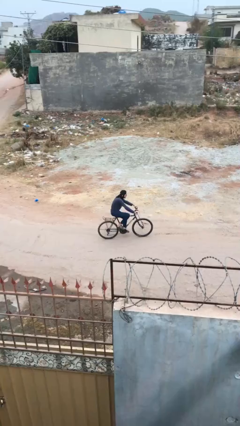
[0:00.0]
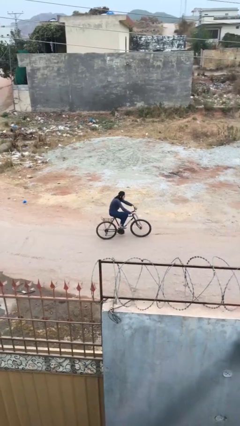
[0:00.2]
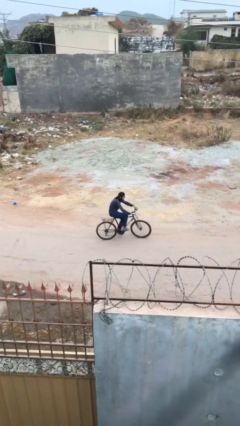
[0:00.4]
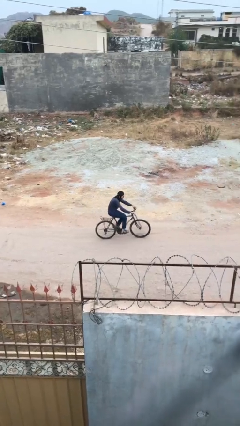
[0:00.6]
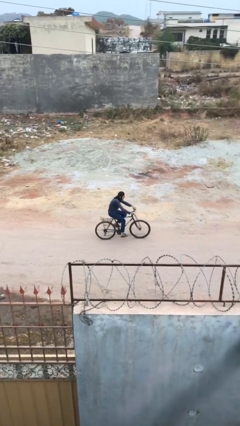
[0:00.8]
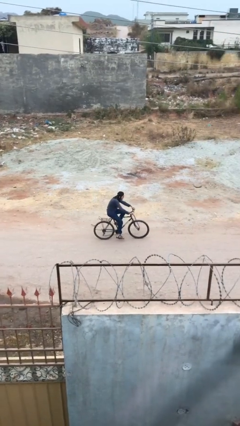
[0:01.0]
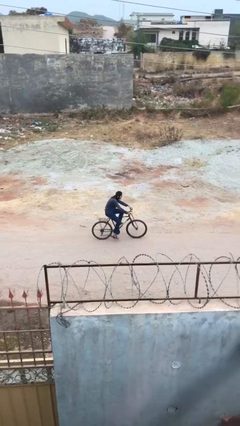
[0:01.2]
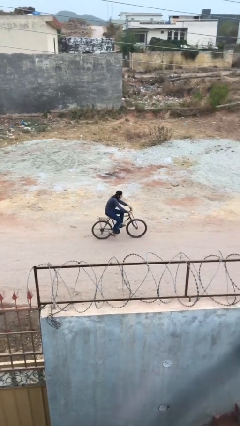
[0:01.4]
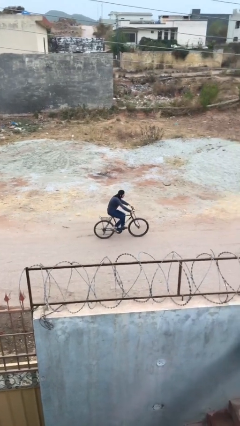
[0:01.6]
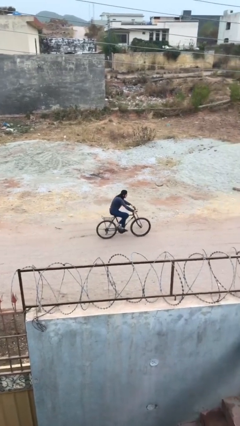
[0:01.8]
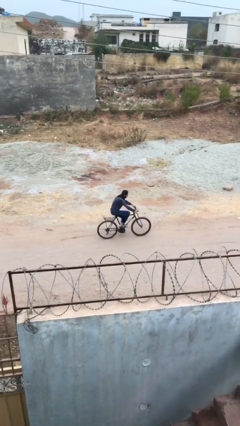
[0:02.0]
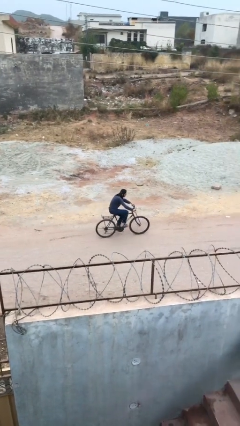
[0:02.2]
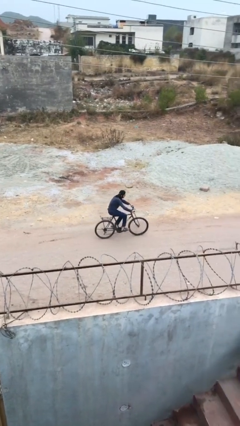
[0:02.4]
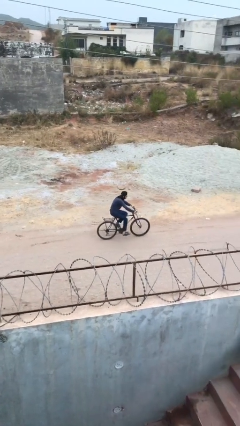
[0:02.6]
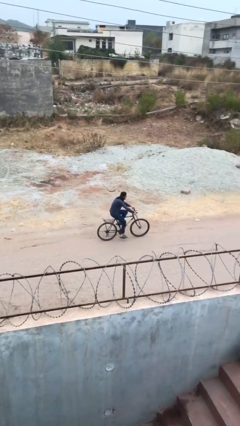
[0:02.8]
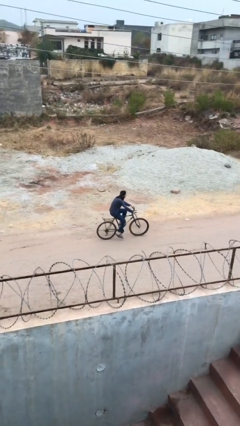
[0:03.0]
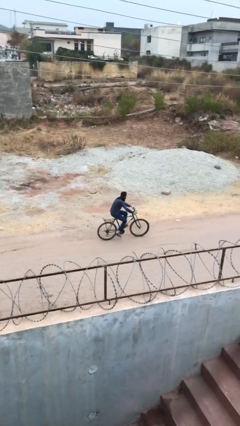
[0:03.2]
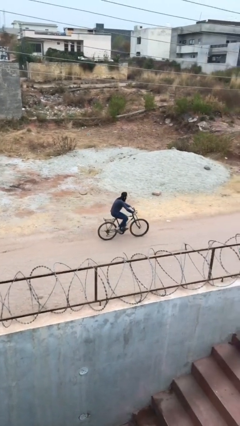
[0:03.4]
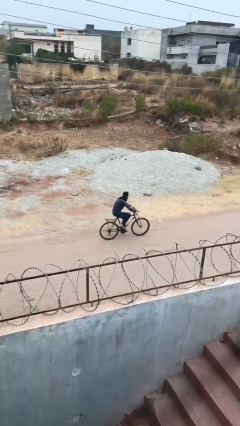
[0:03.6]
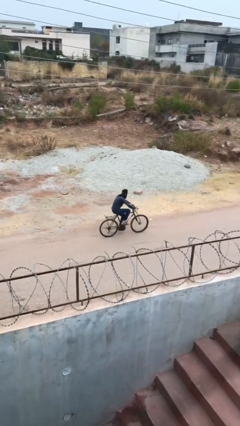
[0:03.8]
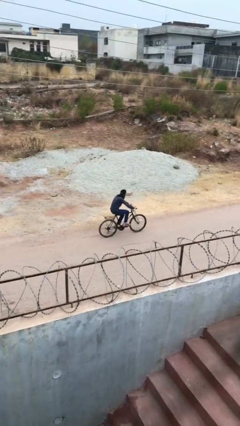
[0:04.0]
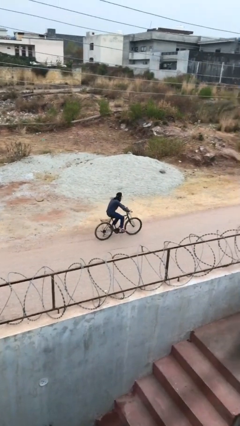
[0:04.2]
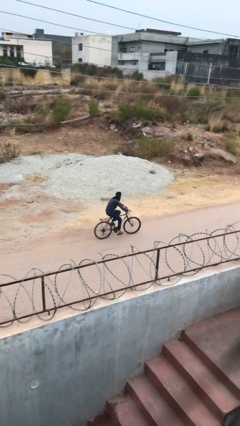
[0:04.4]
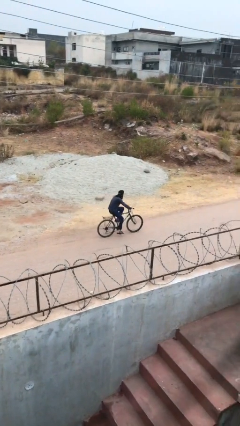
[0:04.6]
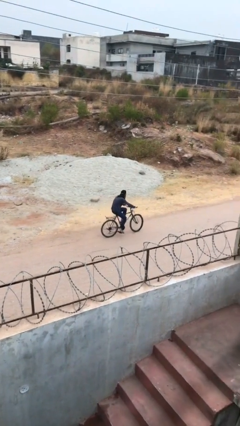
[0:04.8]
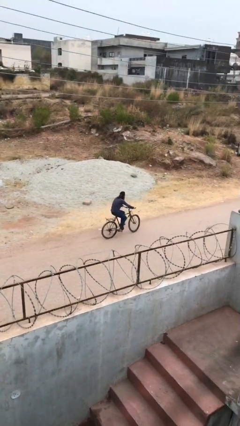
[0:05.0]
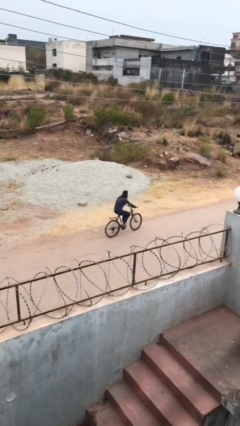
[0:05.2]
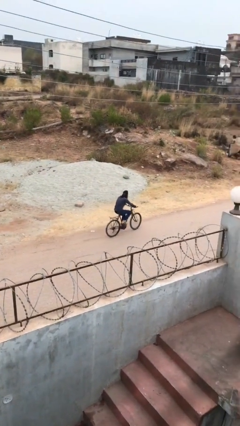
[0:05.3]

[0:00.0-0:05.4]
person rides bicycle

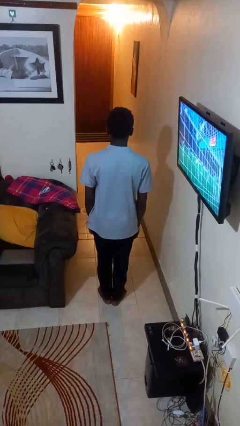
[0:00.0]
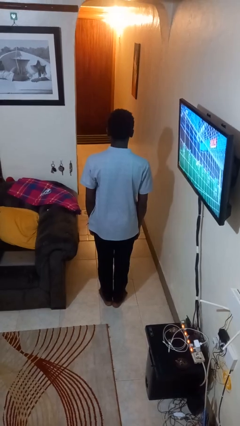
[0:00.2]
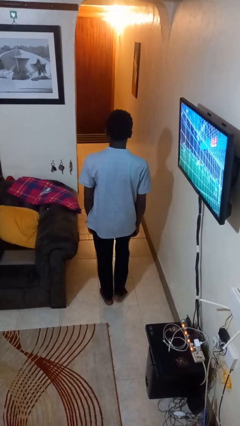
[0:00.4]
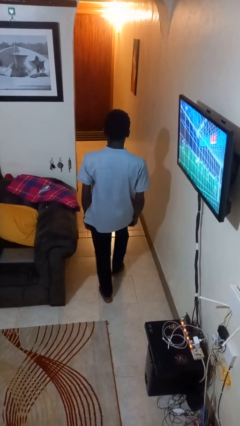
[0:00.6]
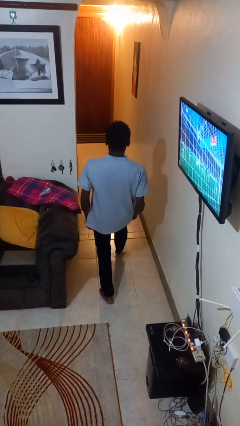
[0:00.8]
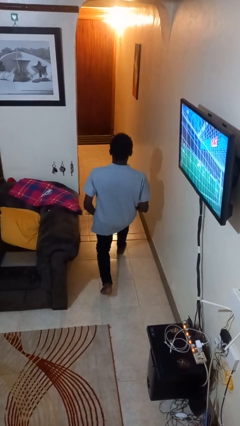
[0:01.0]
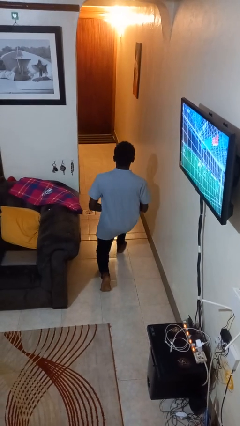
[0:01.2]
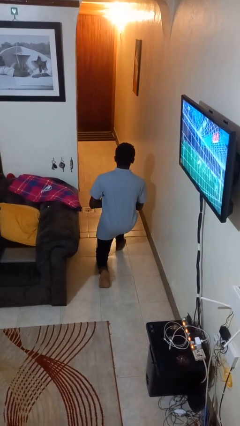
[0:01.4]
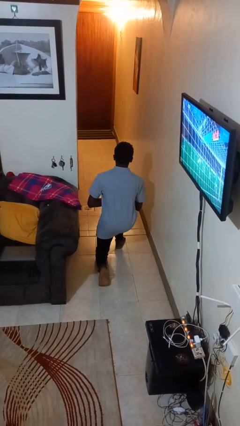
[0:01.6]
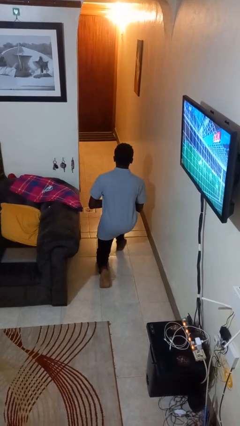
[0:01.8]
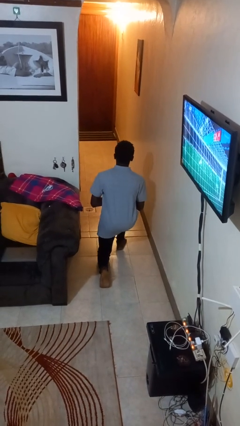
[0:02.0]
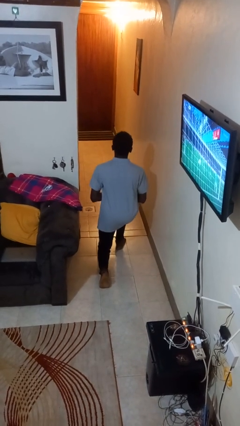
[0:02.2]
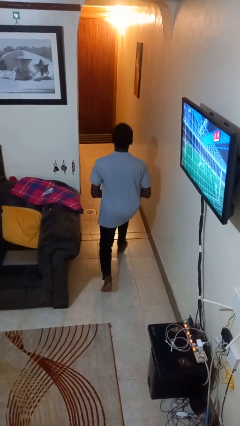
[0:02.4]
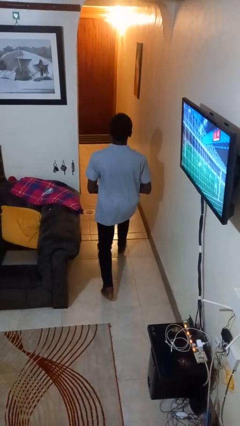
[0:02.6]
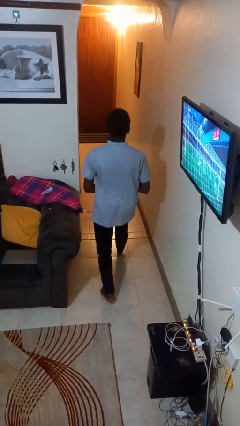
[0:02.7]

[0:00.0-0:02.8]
person exercises with lunges

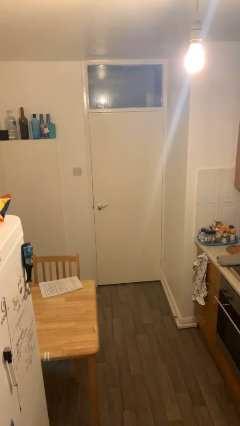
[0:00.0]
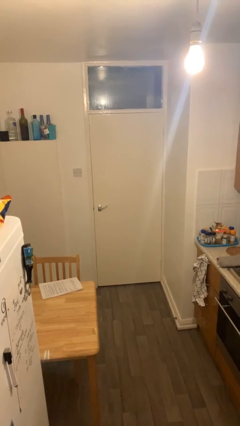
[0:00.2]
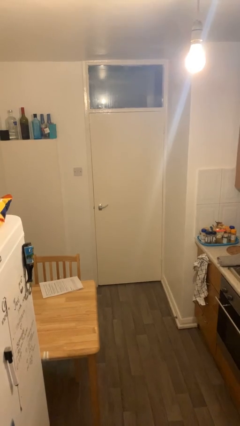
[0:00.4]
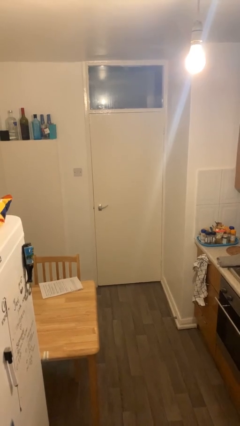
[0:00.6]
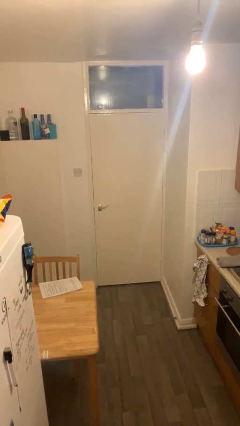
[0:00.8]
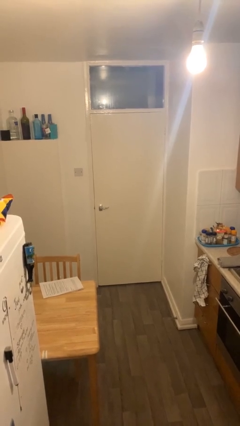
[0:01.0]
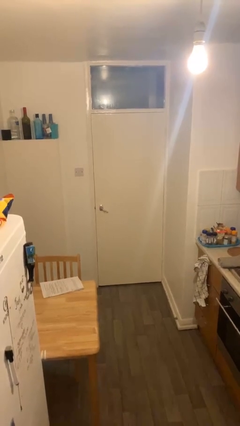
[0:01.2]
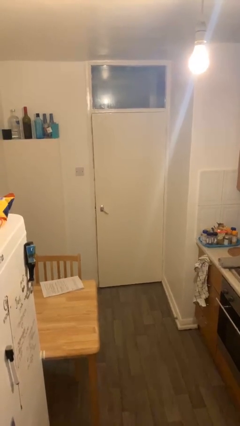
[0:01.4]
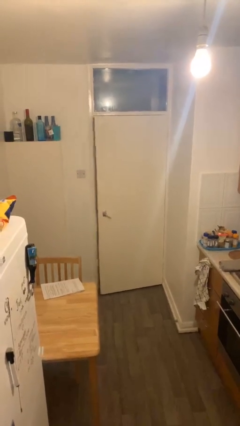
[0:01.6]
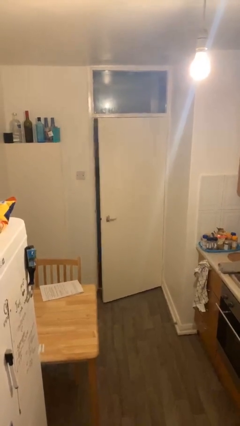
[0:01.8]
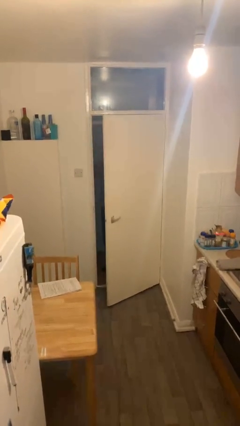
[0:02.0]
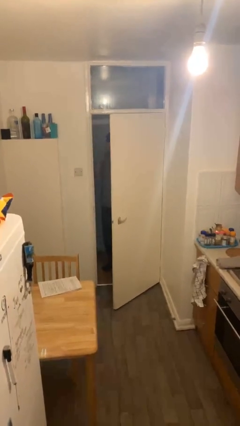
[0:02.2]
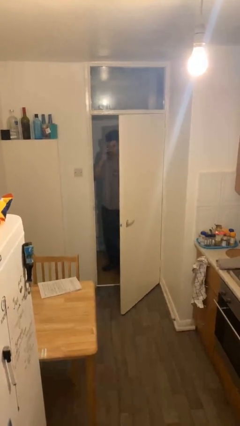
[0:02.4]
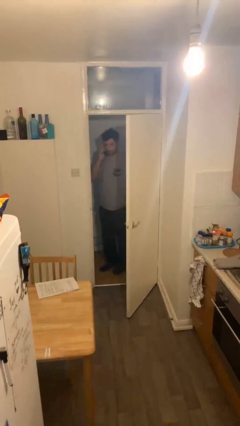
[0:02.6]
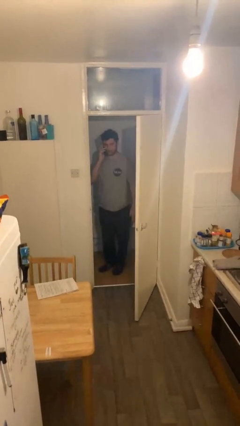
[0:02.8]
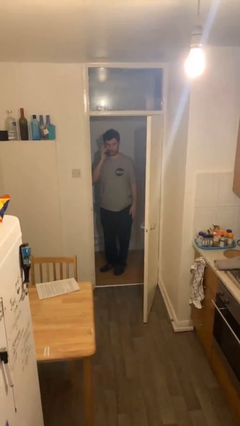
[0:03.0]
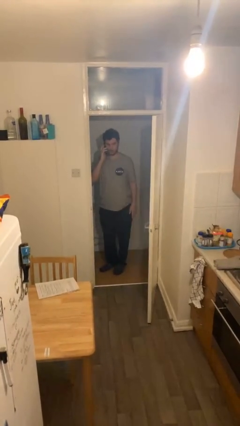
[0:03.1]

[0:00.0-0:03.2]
person opens facility door

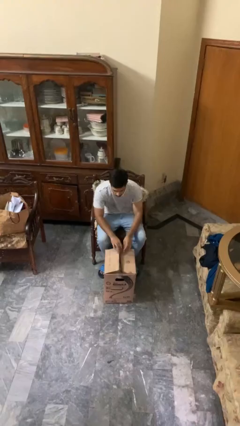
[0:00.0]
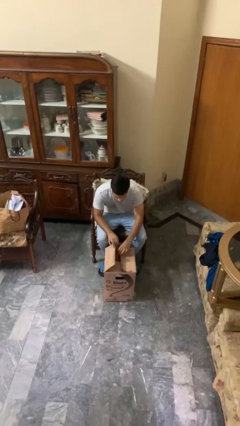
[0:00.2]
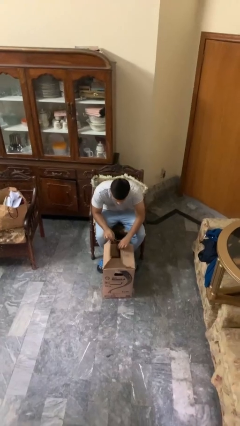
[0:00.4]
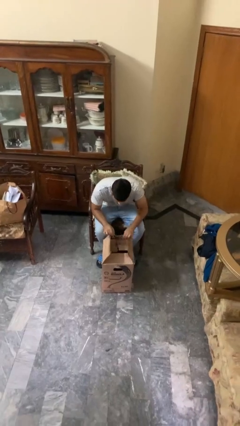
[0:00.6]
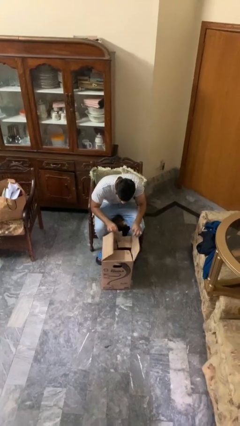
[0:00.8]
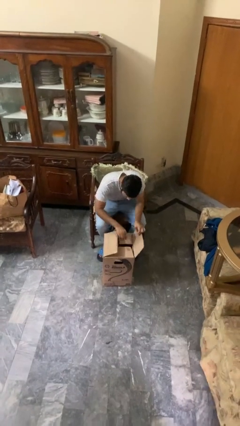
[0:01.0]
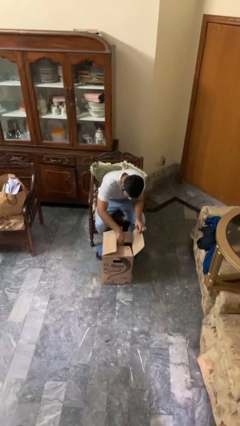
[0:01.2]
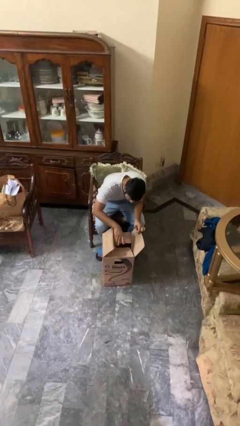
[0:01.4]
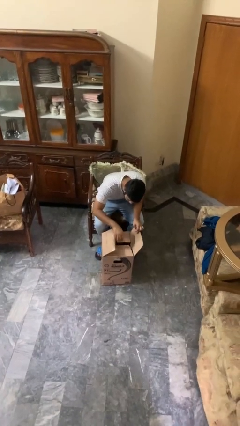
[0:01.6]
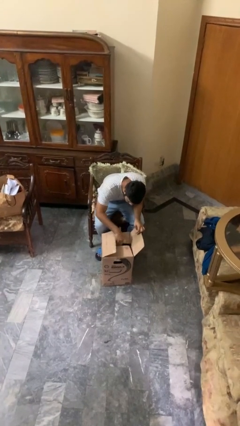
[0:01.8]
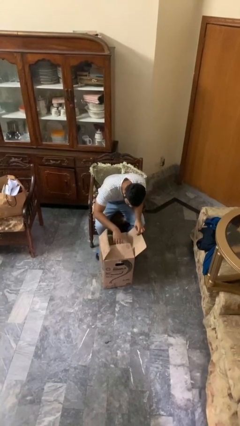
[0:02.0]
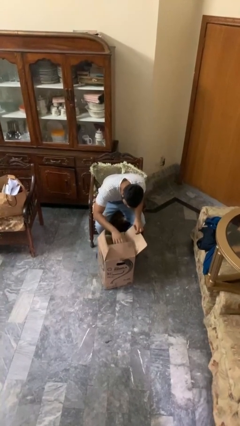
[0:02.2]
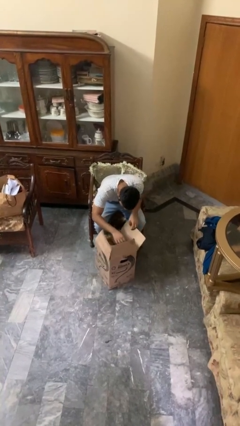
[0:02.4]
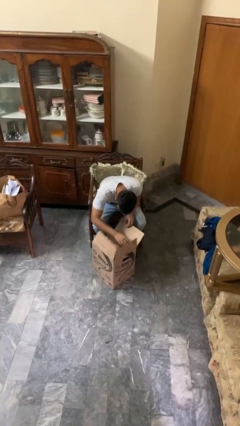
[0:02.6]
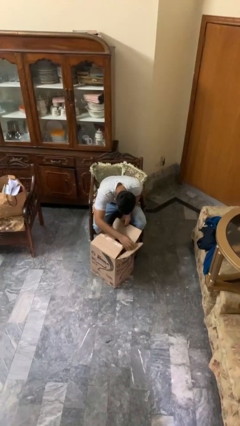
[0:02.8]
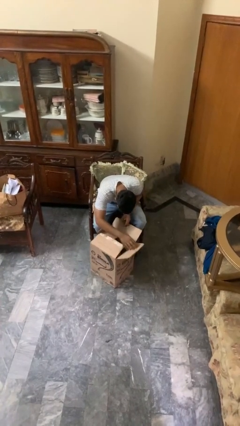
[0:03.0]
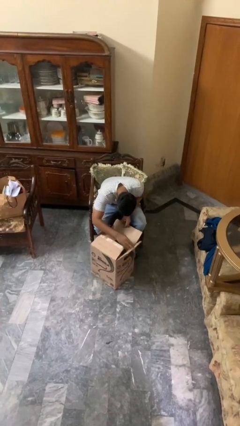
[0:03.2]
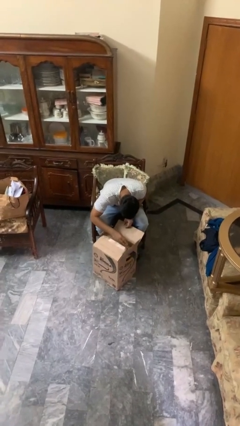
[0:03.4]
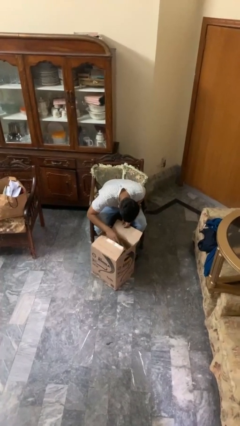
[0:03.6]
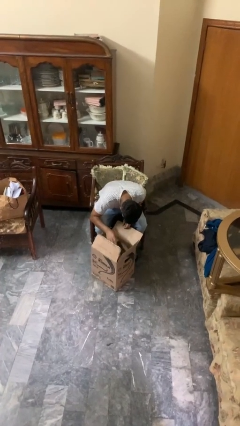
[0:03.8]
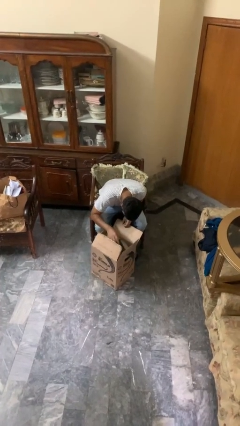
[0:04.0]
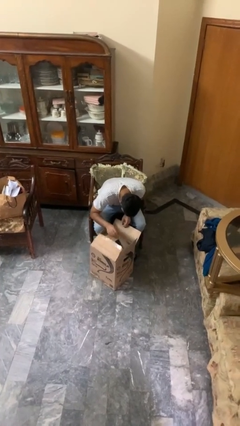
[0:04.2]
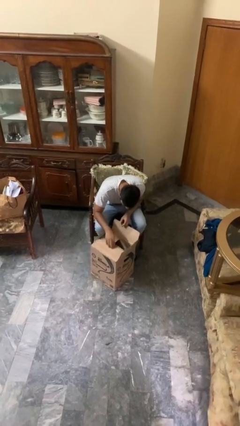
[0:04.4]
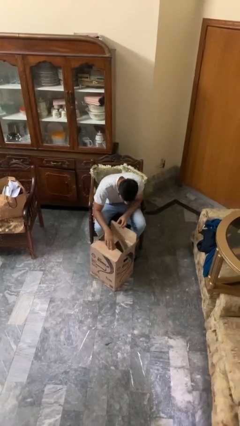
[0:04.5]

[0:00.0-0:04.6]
person searches in box

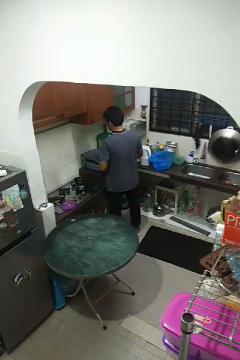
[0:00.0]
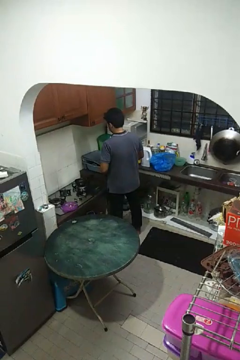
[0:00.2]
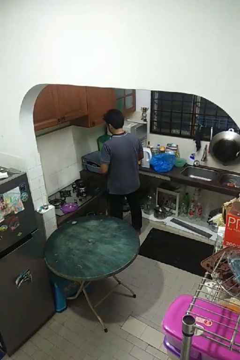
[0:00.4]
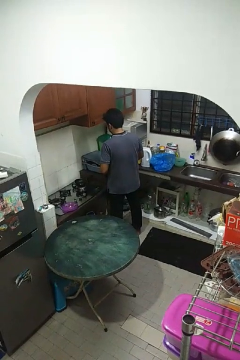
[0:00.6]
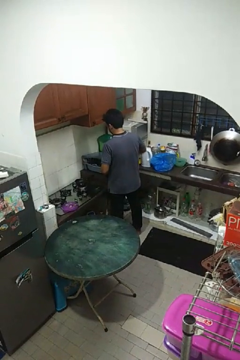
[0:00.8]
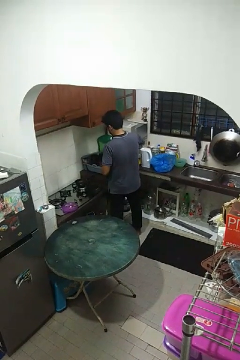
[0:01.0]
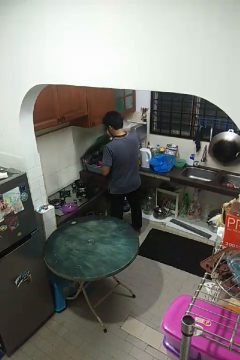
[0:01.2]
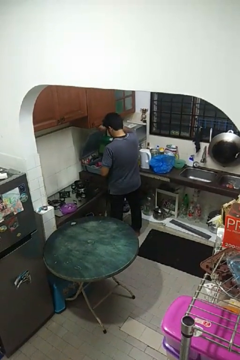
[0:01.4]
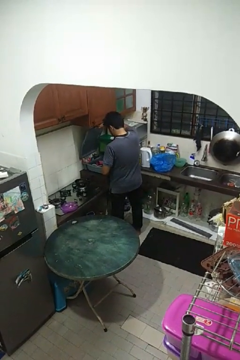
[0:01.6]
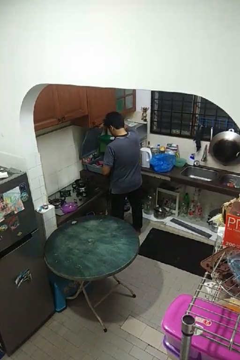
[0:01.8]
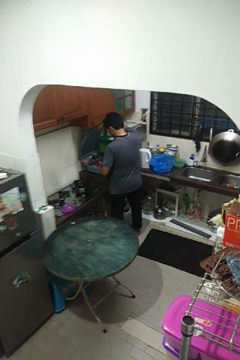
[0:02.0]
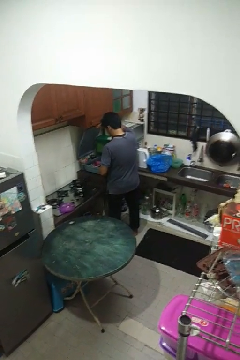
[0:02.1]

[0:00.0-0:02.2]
person opens dishwasher
